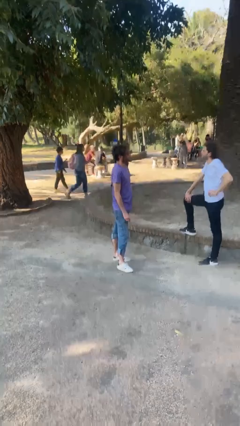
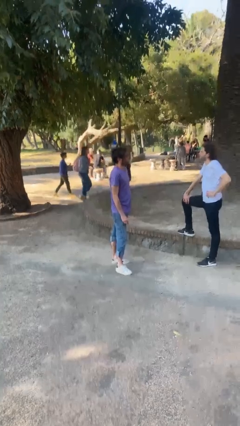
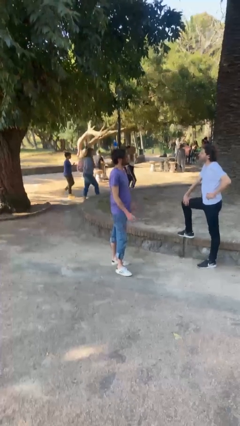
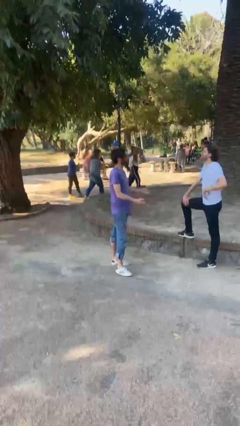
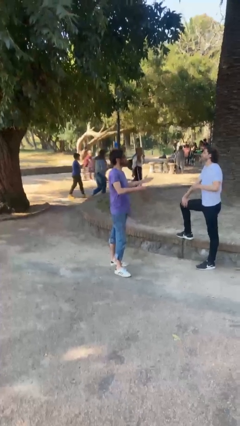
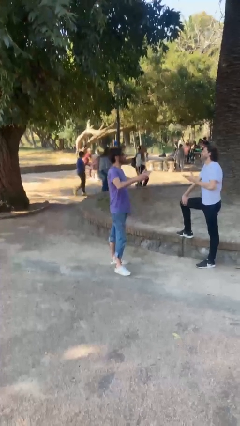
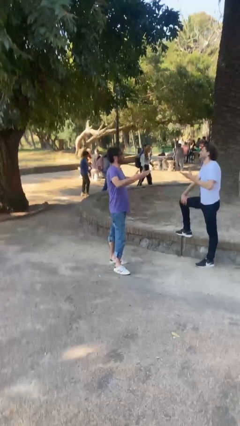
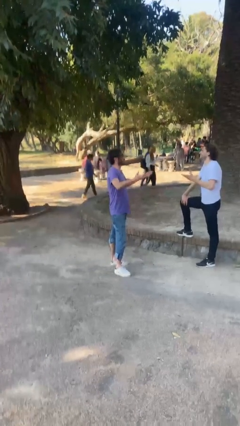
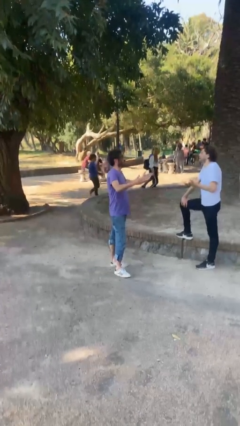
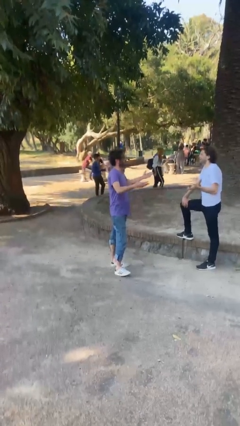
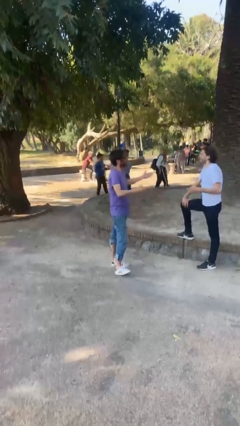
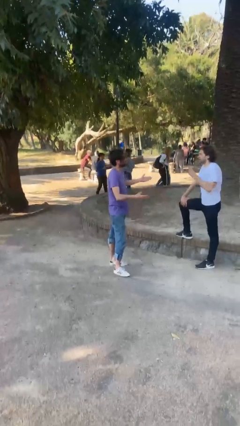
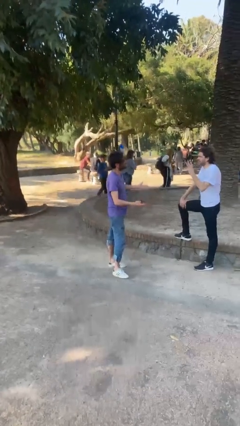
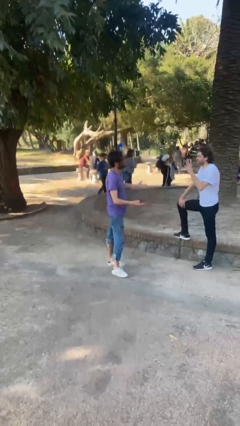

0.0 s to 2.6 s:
person talks to person

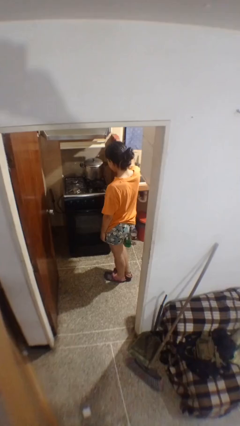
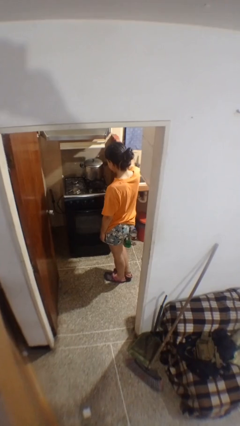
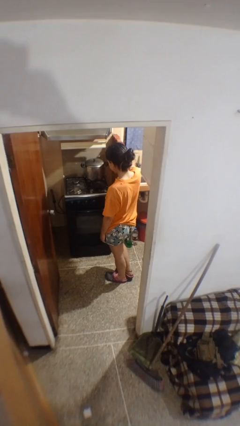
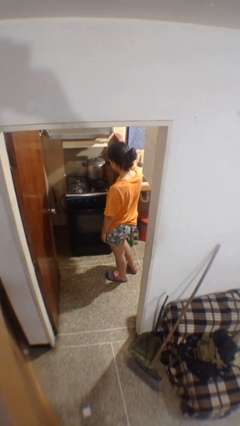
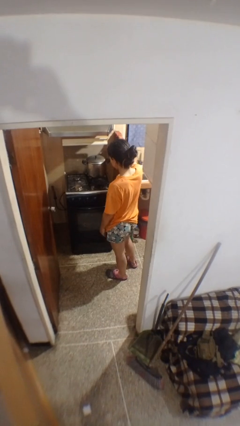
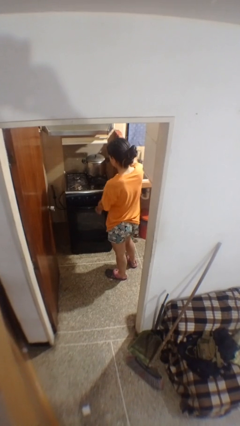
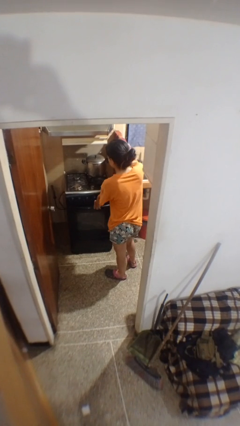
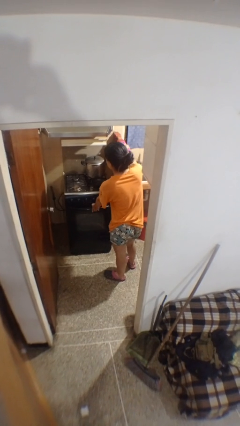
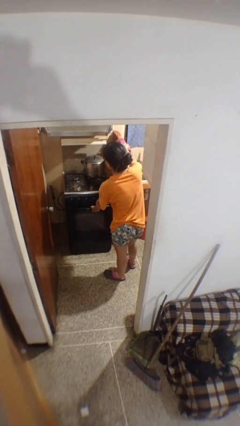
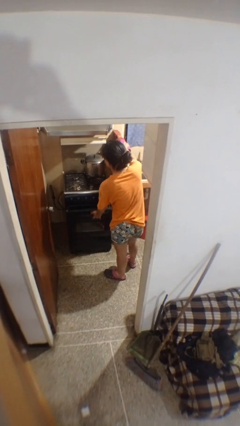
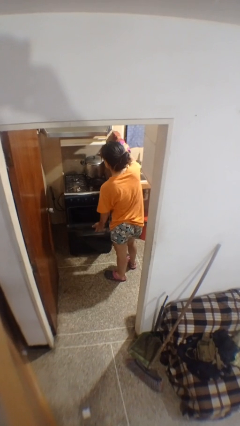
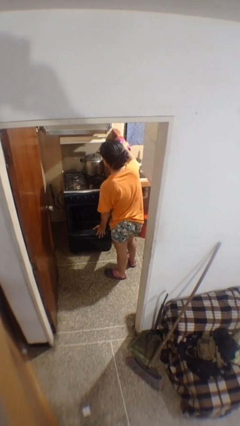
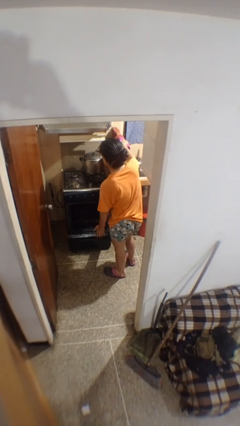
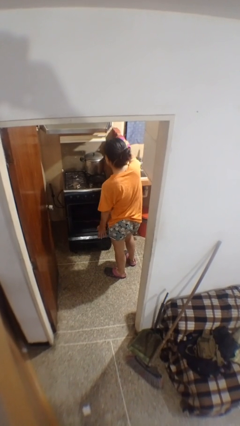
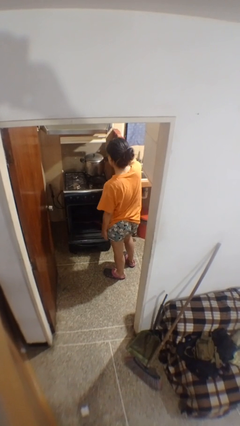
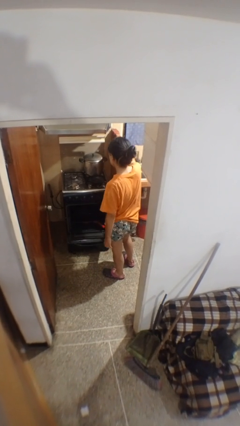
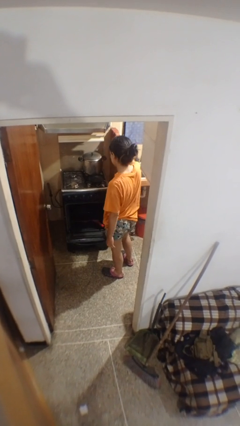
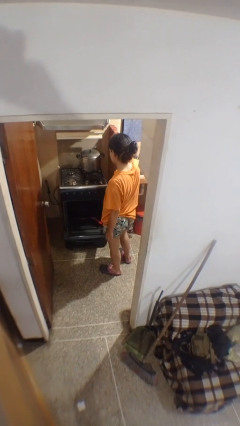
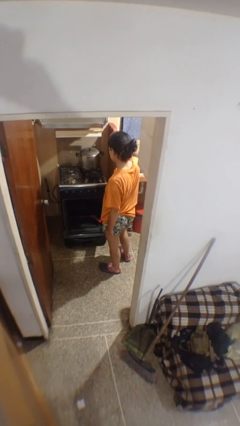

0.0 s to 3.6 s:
person opens oven door

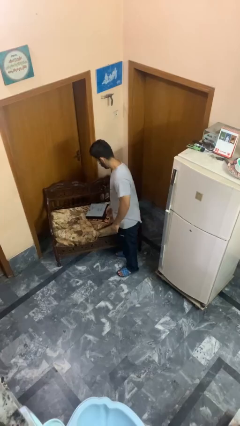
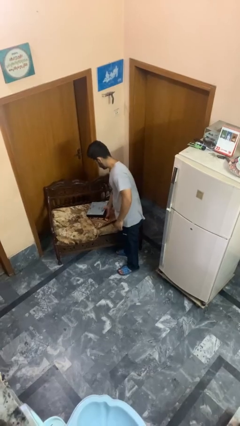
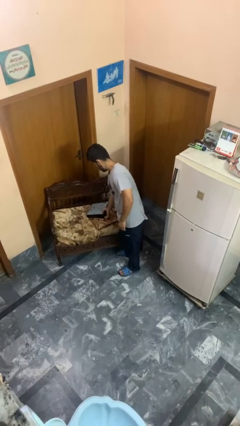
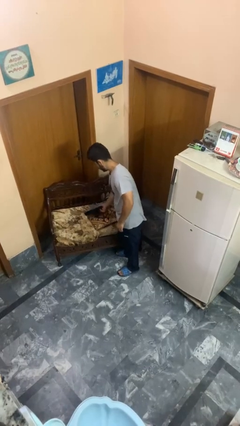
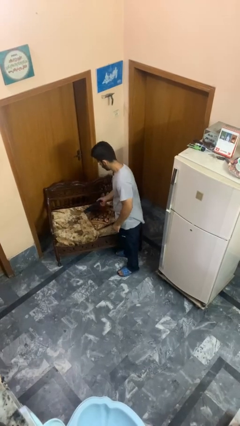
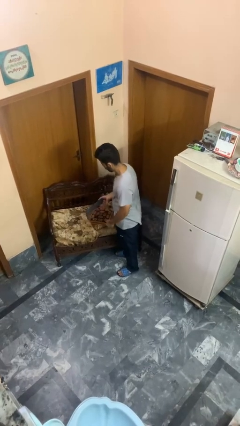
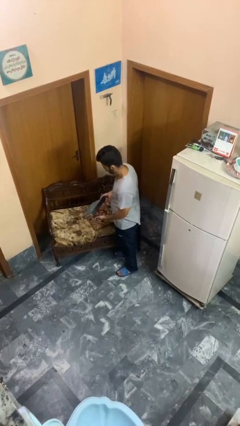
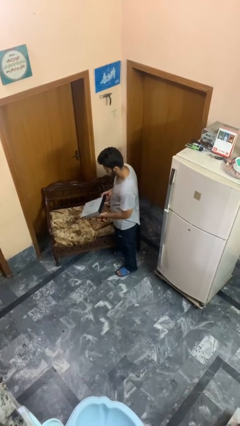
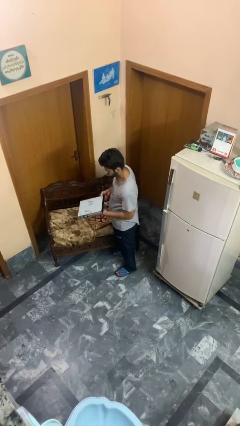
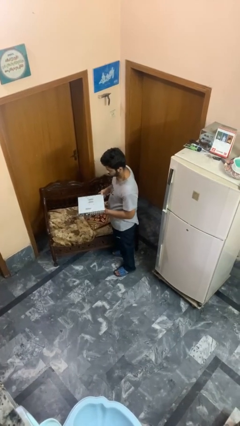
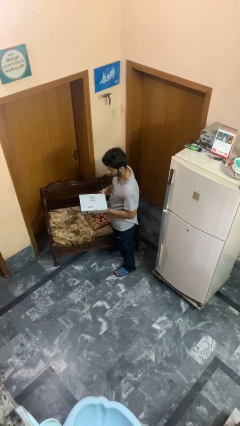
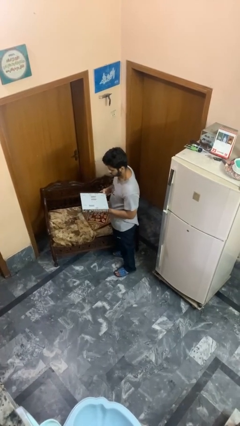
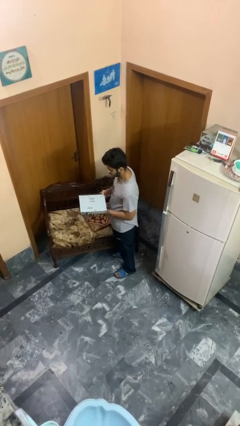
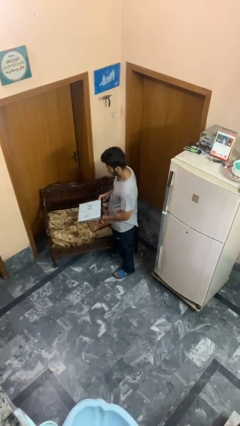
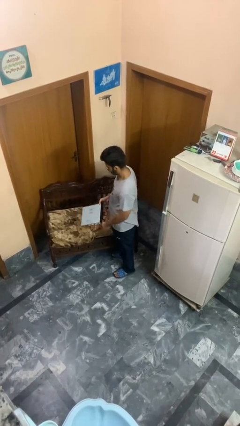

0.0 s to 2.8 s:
person picks up object from couch

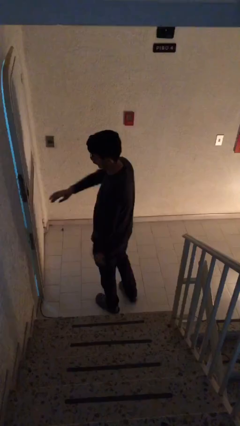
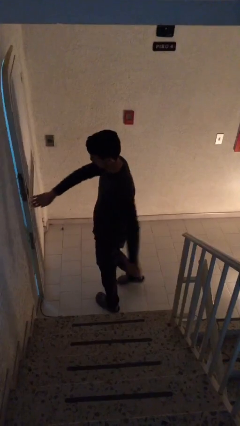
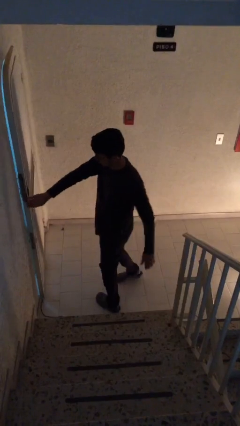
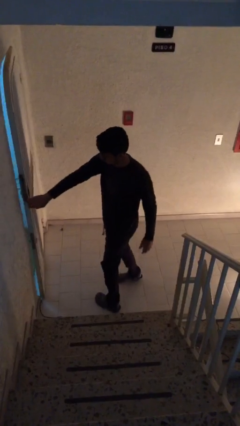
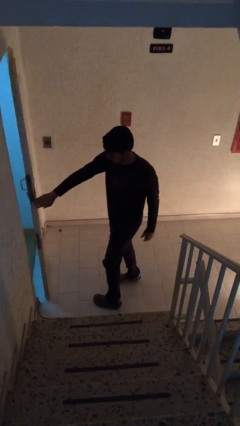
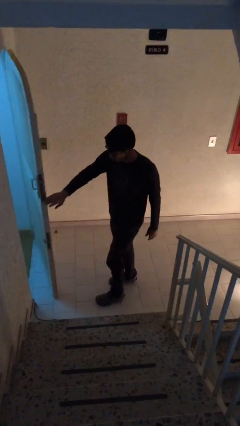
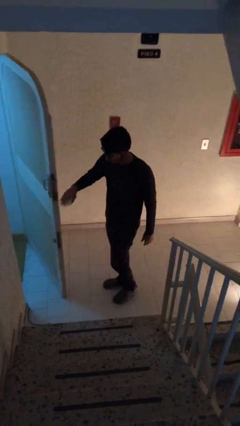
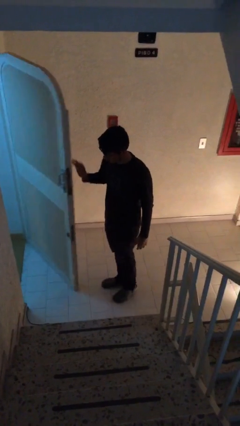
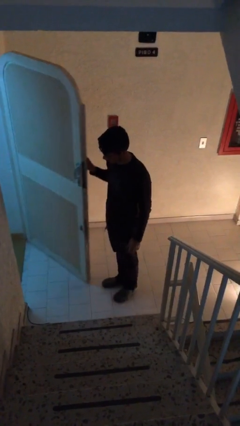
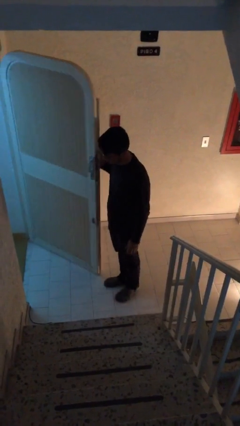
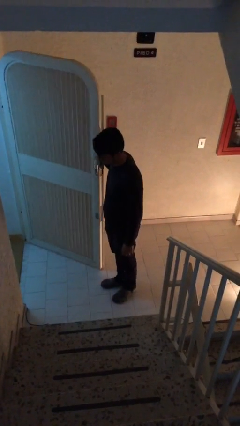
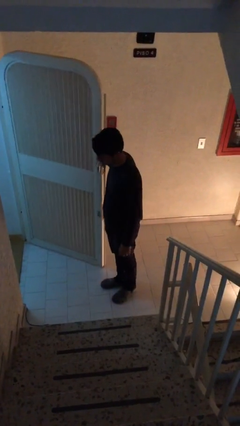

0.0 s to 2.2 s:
person opens facility door

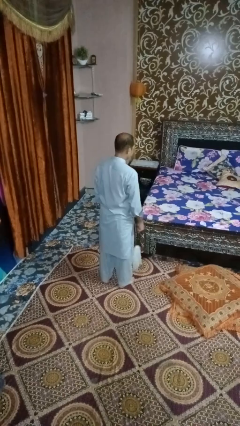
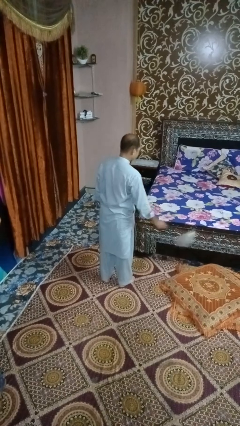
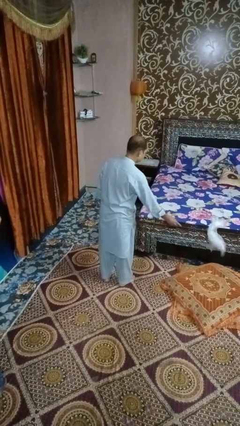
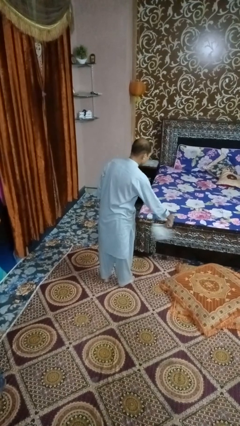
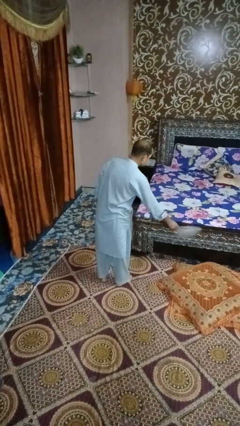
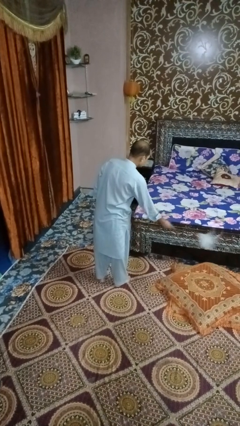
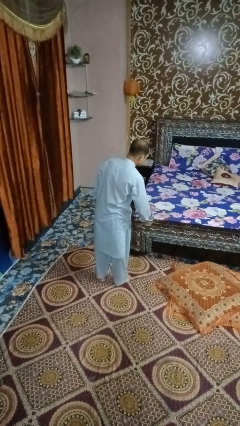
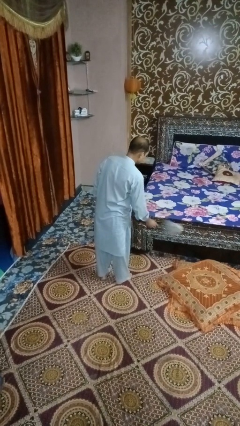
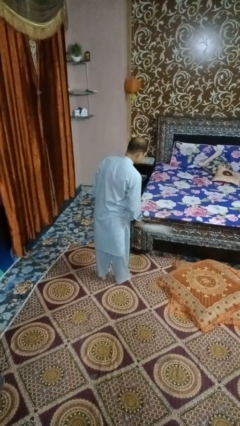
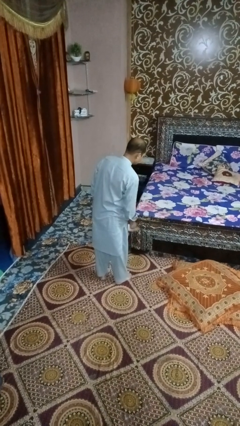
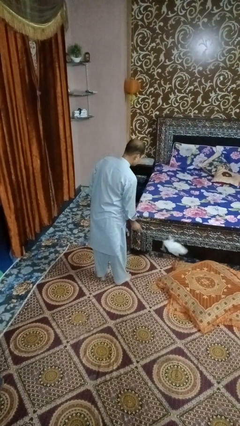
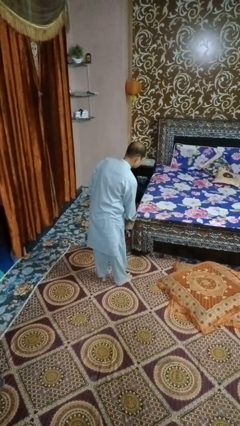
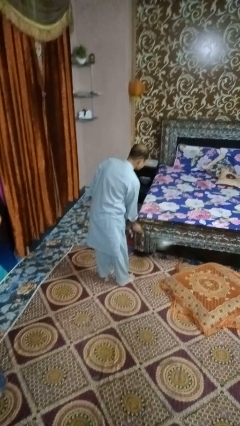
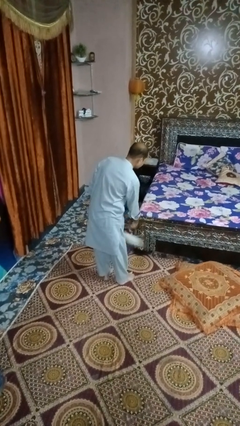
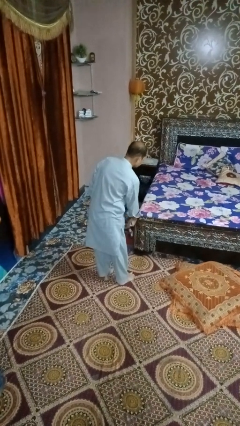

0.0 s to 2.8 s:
person dusts furniture

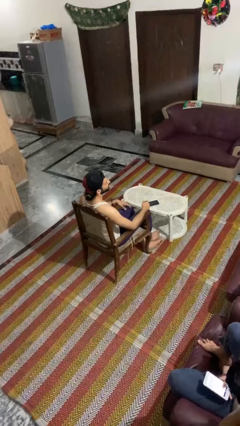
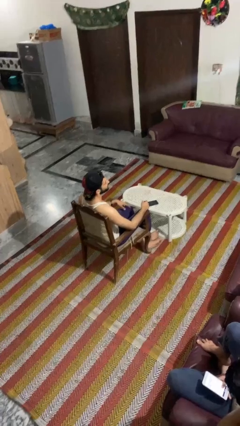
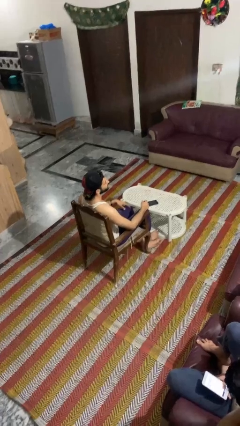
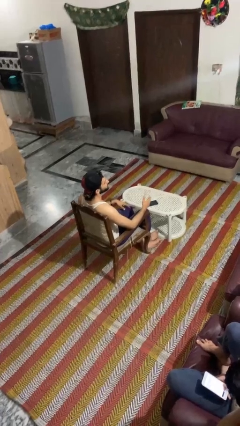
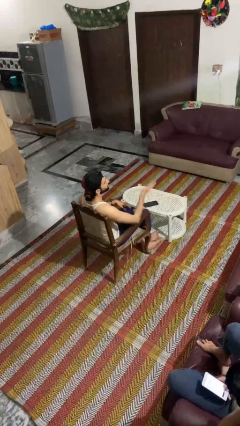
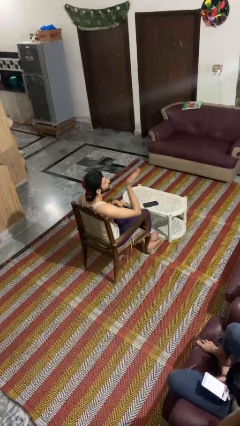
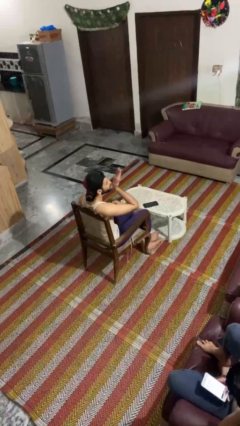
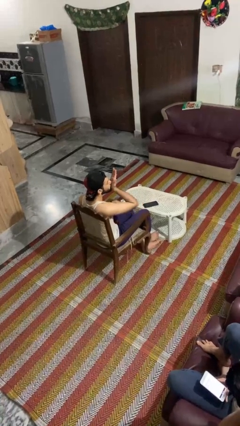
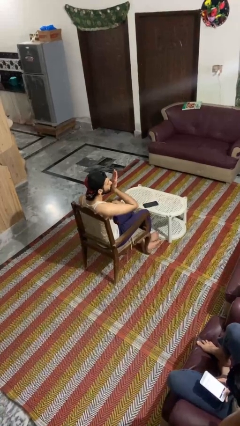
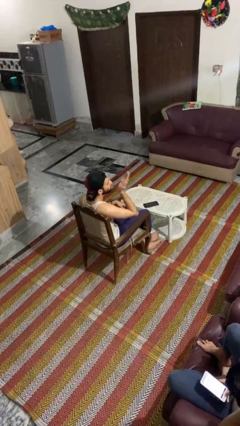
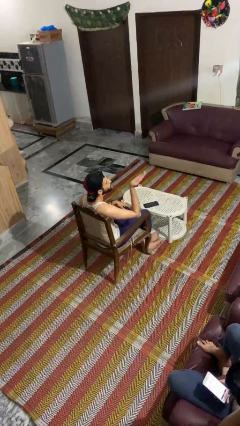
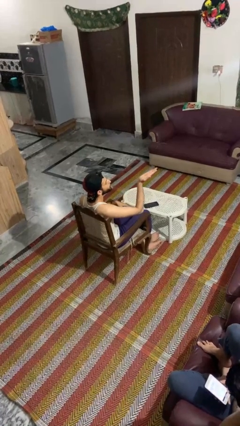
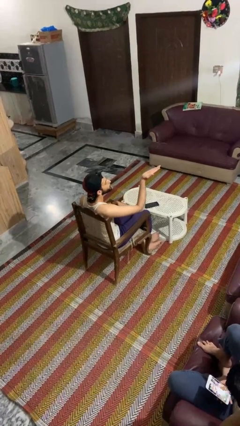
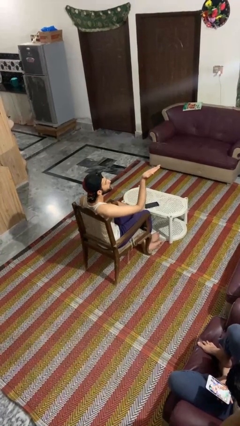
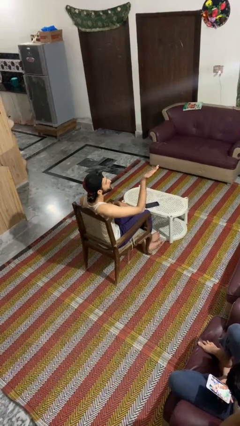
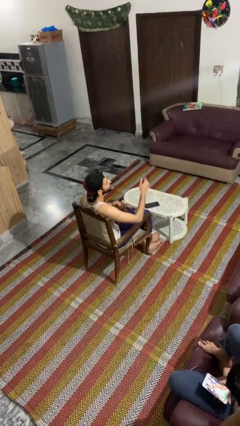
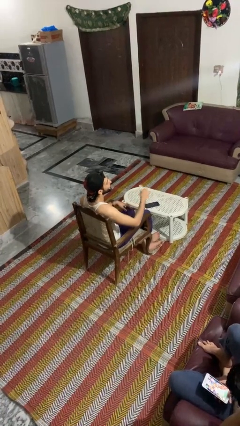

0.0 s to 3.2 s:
person gestures blow kiss
